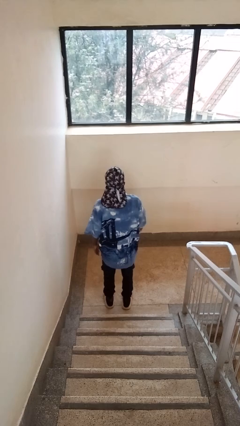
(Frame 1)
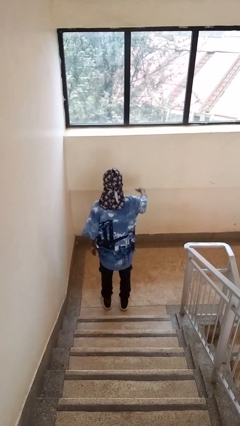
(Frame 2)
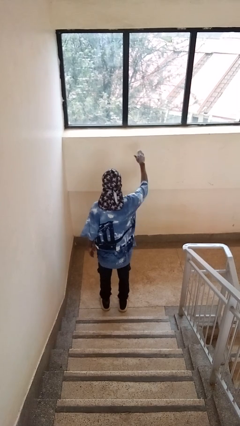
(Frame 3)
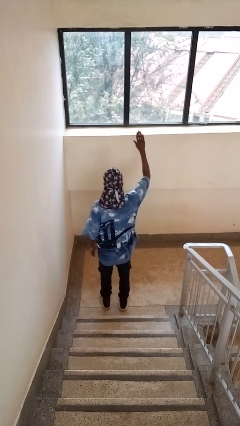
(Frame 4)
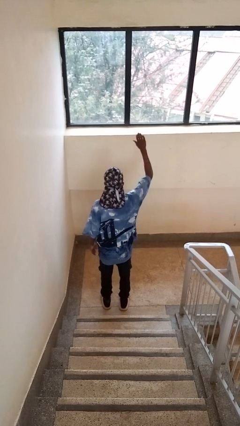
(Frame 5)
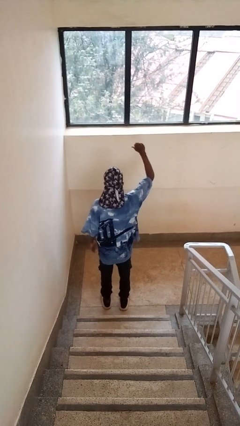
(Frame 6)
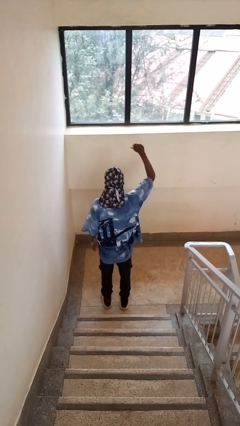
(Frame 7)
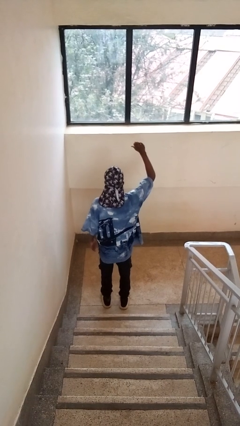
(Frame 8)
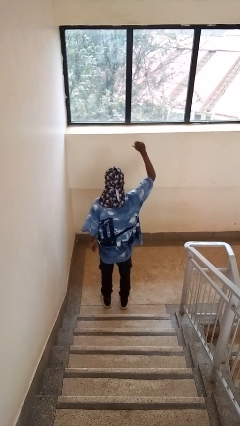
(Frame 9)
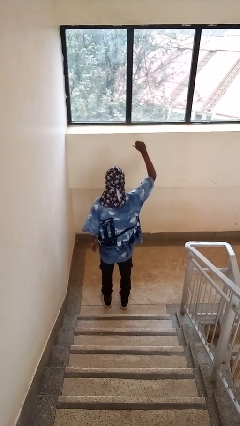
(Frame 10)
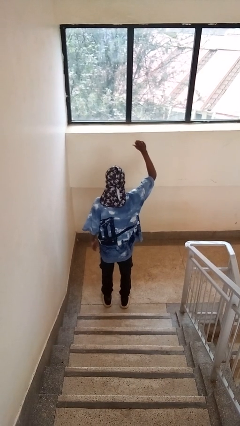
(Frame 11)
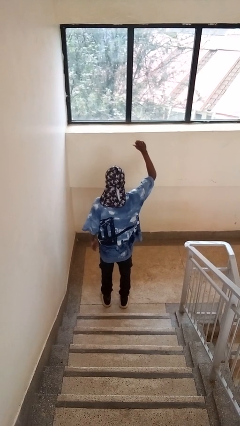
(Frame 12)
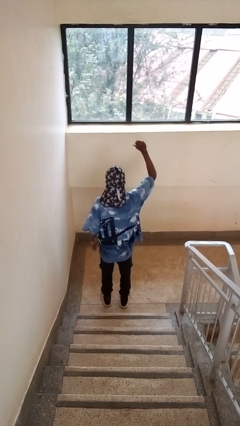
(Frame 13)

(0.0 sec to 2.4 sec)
person gestures swipe up

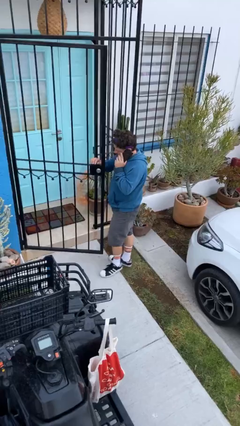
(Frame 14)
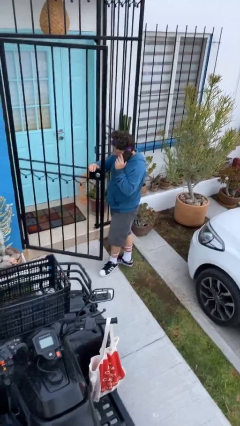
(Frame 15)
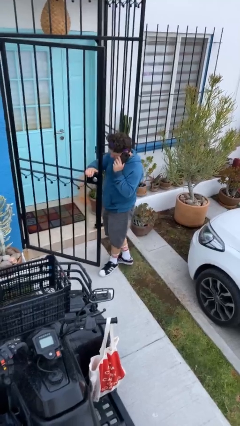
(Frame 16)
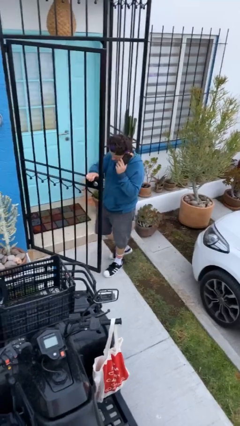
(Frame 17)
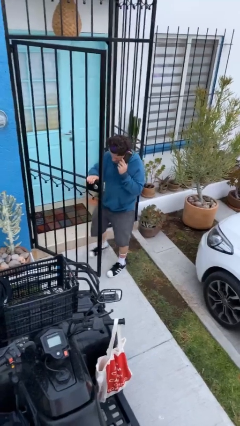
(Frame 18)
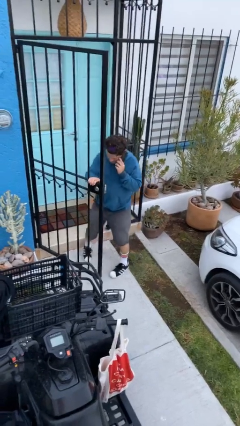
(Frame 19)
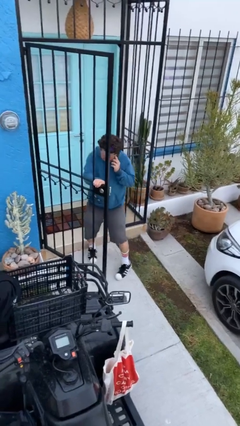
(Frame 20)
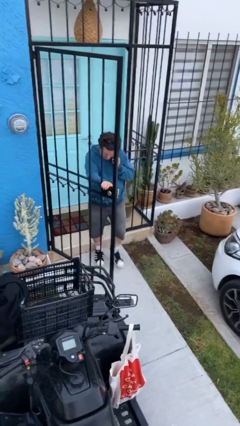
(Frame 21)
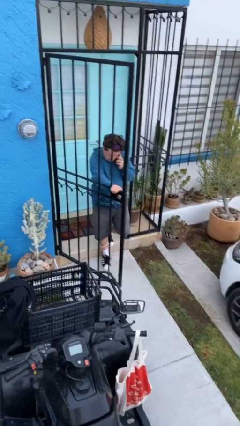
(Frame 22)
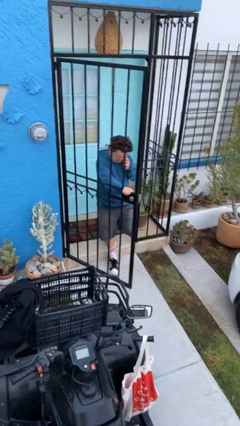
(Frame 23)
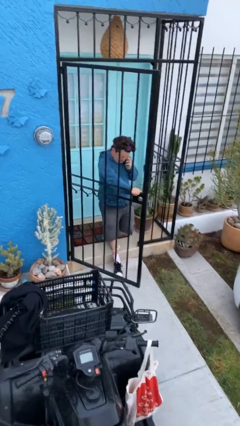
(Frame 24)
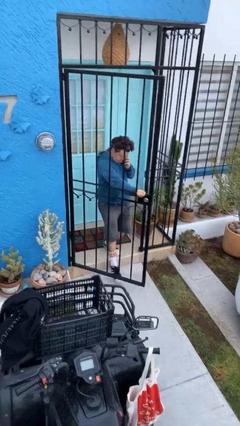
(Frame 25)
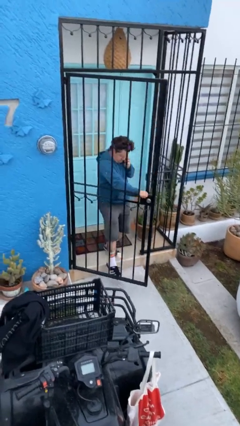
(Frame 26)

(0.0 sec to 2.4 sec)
person exits scene through structure

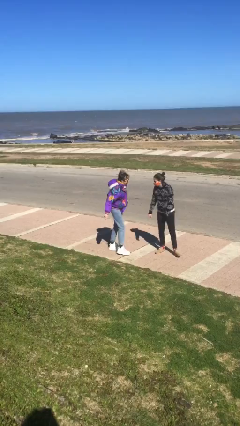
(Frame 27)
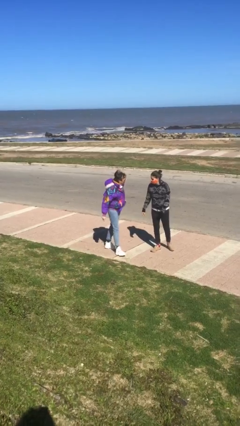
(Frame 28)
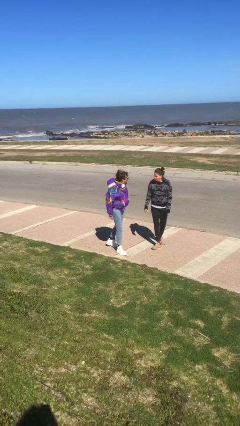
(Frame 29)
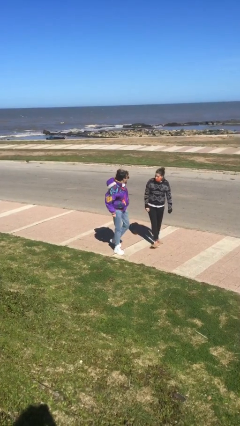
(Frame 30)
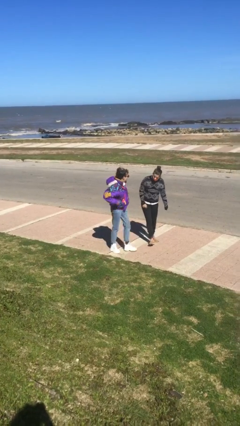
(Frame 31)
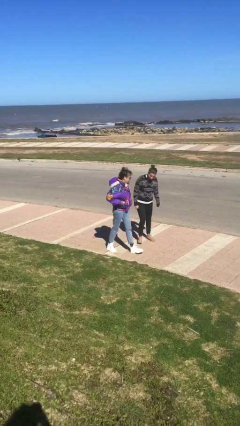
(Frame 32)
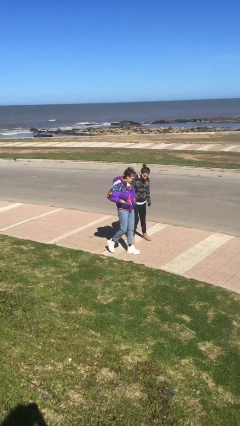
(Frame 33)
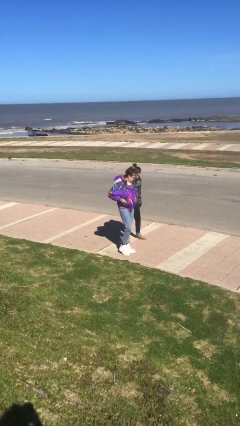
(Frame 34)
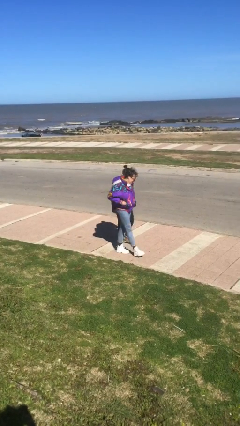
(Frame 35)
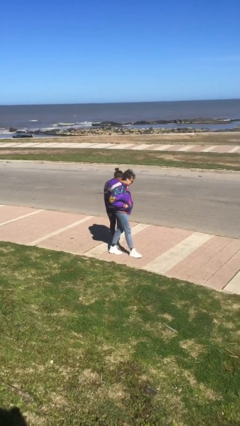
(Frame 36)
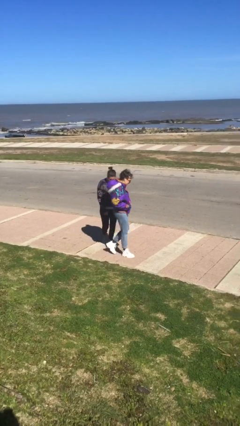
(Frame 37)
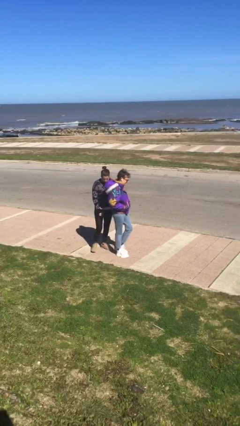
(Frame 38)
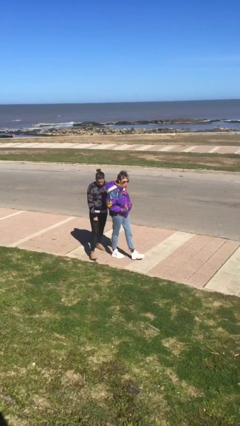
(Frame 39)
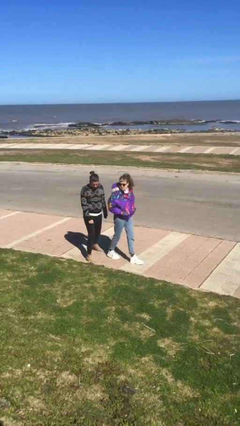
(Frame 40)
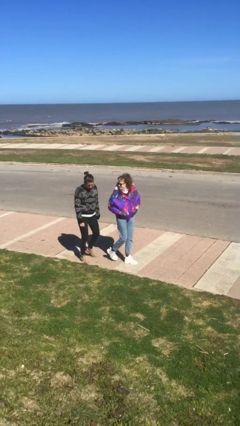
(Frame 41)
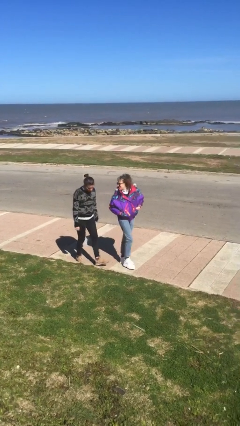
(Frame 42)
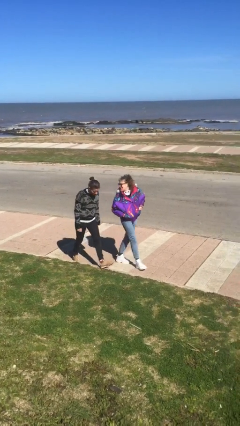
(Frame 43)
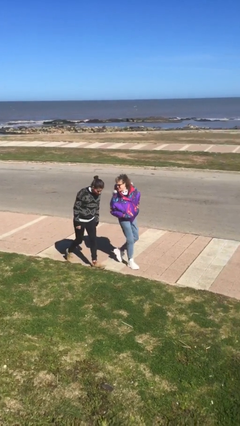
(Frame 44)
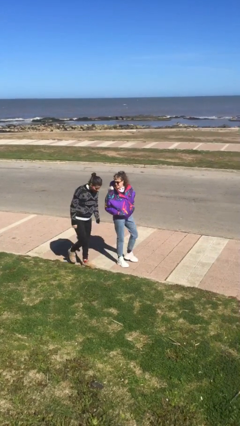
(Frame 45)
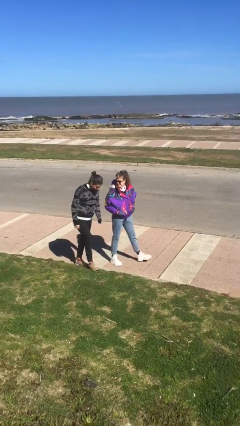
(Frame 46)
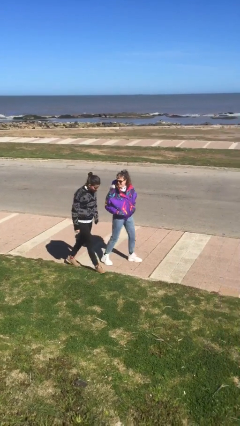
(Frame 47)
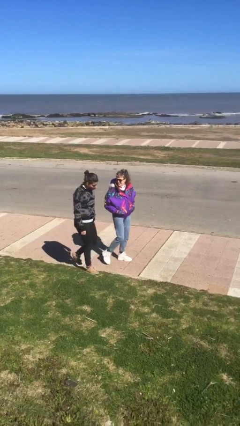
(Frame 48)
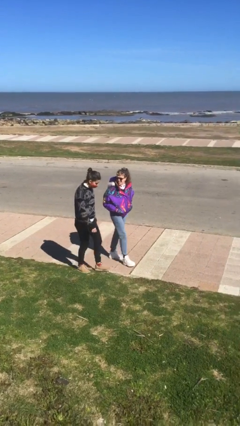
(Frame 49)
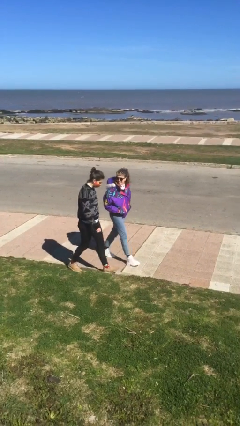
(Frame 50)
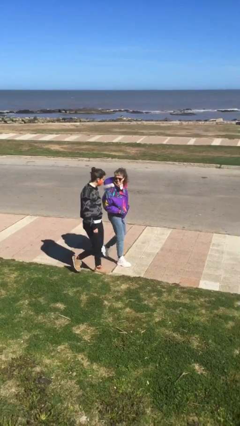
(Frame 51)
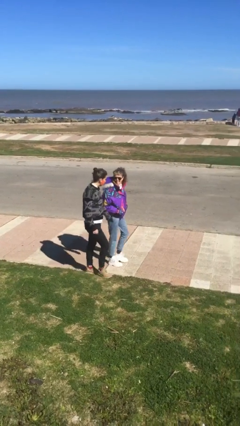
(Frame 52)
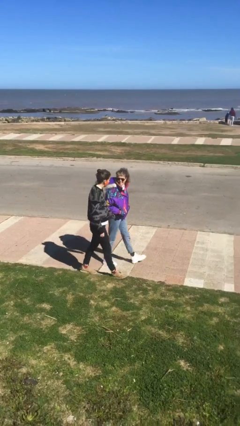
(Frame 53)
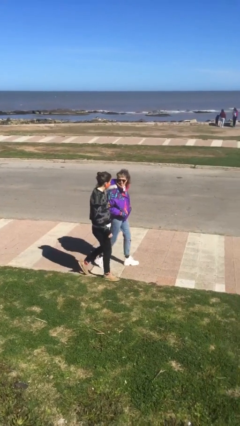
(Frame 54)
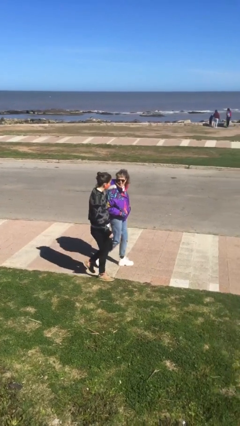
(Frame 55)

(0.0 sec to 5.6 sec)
person talks to person

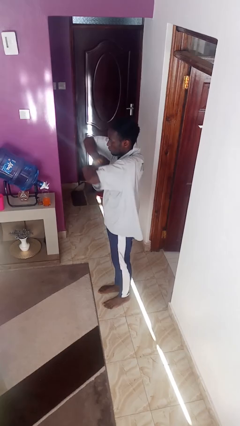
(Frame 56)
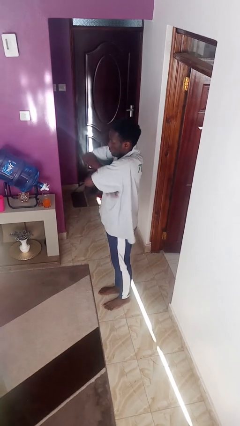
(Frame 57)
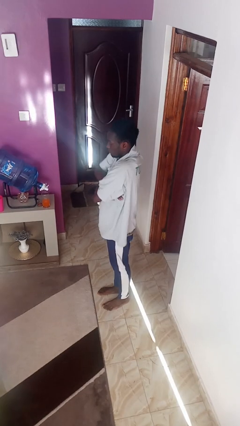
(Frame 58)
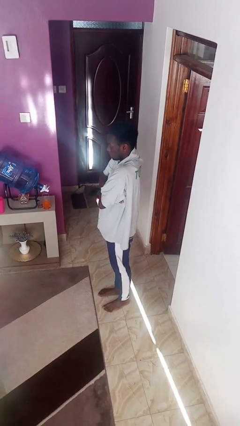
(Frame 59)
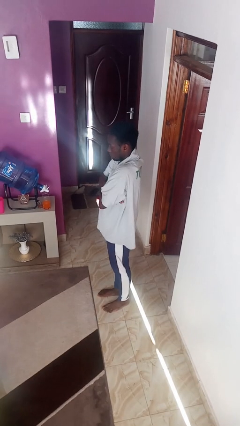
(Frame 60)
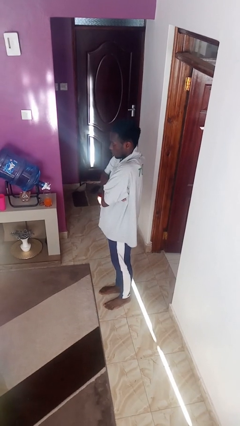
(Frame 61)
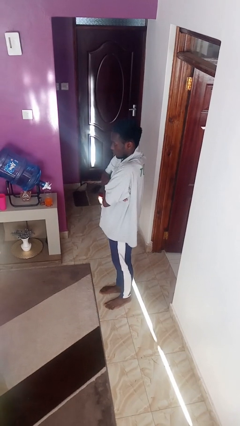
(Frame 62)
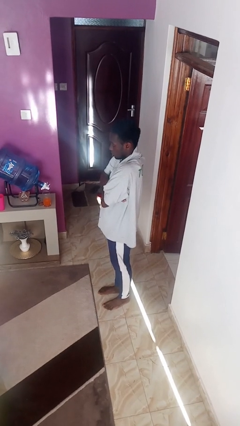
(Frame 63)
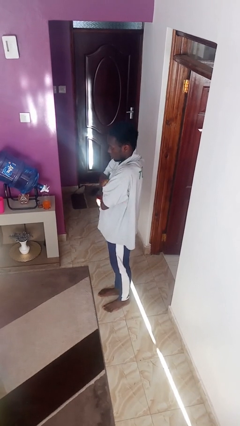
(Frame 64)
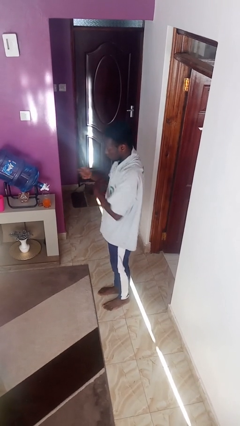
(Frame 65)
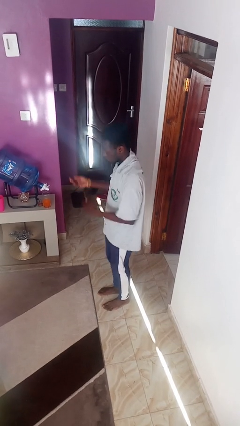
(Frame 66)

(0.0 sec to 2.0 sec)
person crosses arms

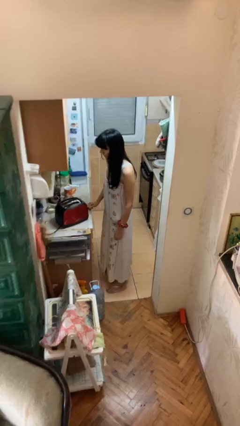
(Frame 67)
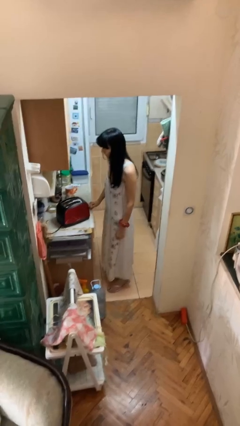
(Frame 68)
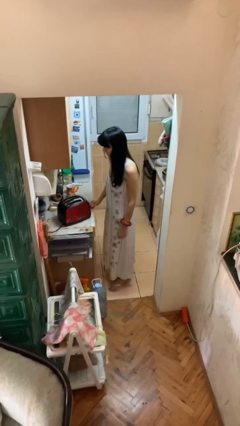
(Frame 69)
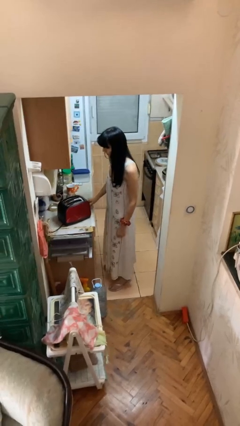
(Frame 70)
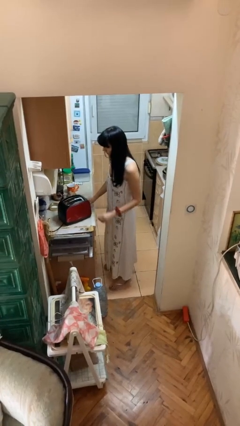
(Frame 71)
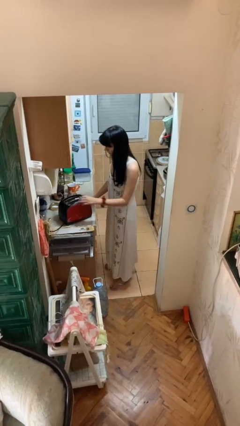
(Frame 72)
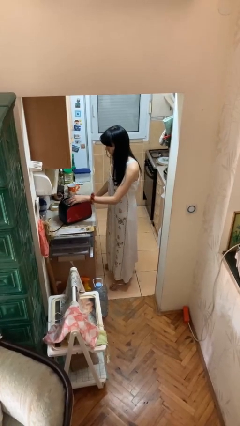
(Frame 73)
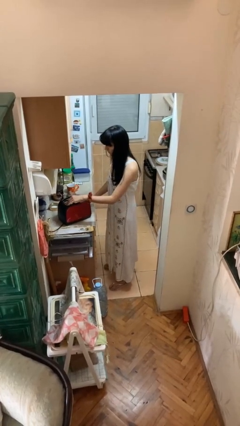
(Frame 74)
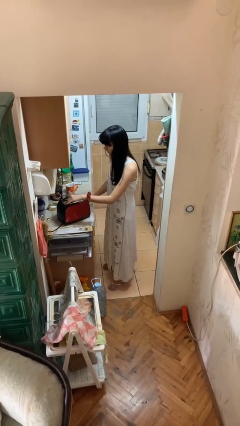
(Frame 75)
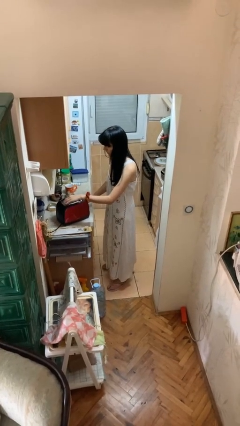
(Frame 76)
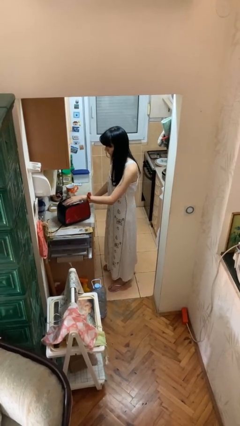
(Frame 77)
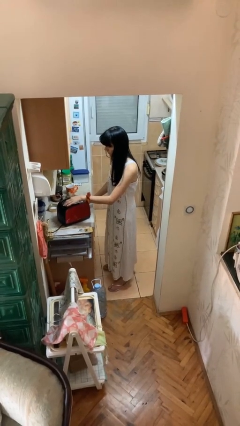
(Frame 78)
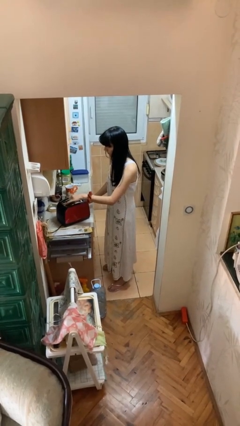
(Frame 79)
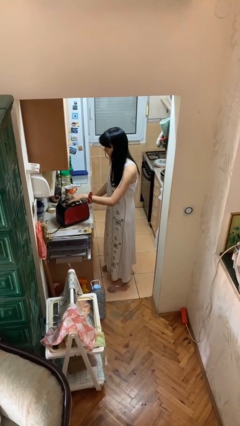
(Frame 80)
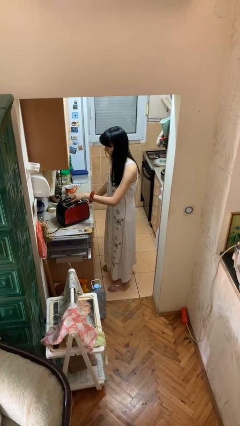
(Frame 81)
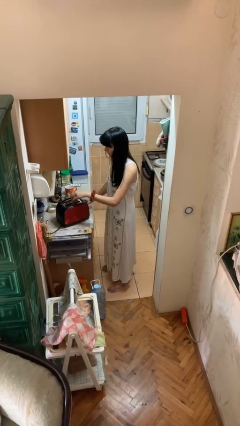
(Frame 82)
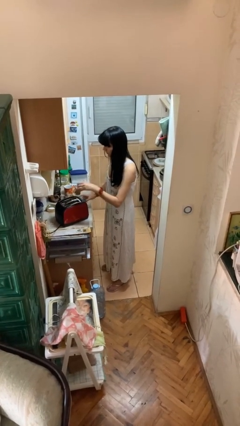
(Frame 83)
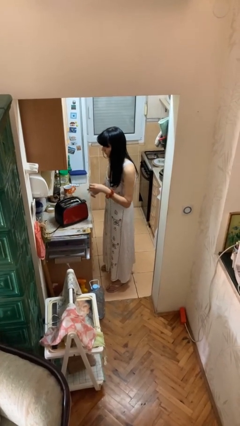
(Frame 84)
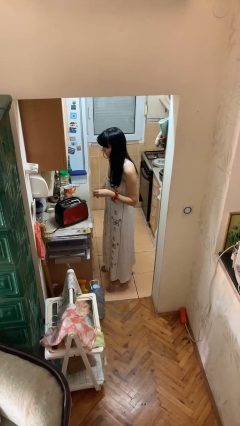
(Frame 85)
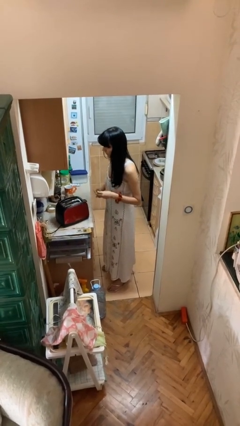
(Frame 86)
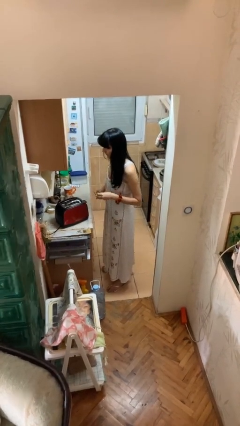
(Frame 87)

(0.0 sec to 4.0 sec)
person takes object from toaster

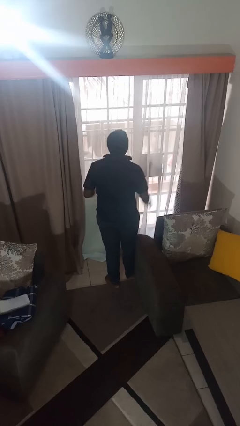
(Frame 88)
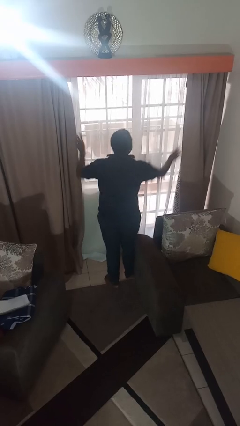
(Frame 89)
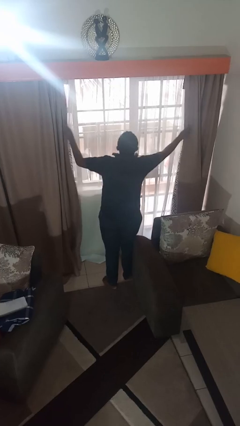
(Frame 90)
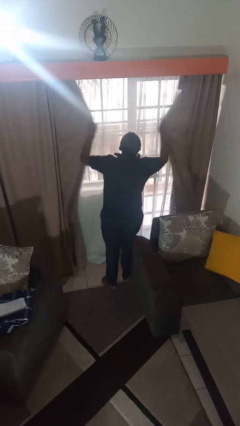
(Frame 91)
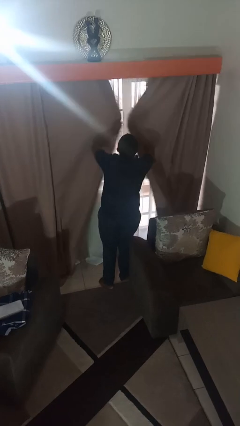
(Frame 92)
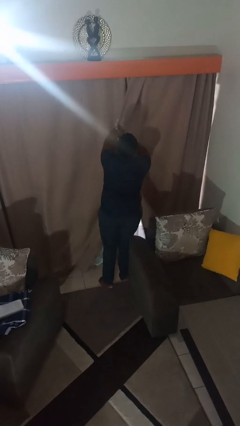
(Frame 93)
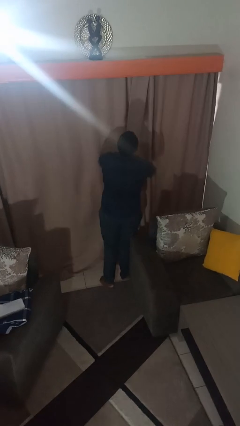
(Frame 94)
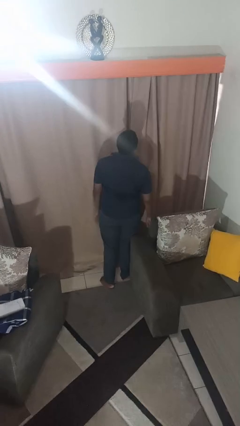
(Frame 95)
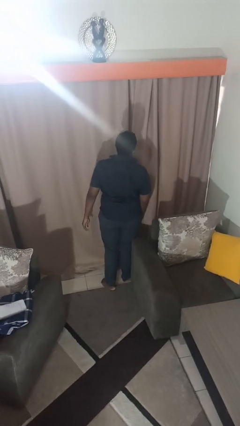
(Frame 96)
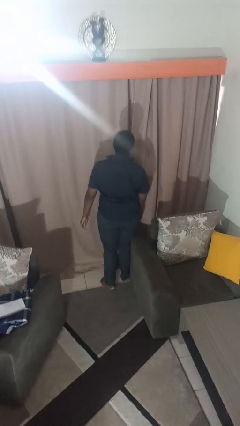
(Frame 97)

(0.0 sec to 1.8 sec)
person closes curtains
